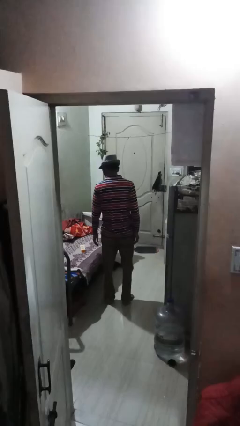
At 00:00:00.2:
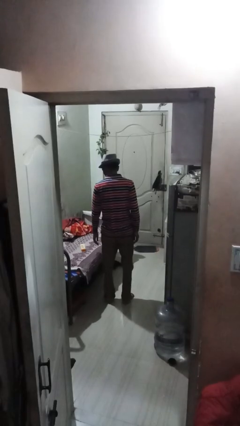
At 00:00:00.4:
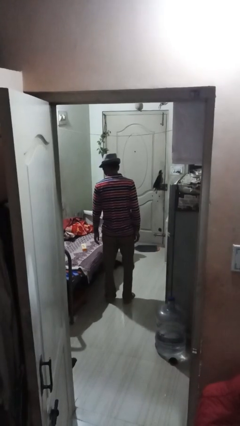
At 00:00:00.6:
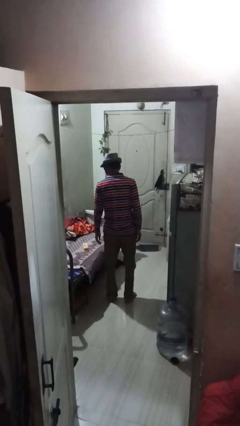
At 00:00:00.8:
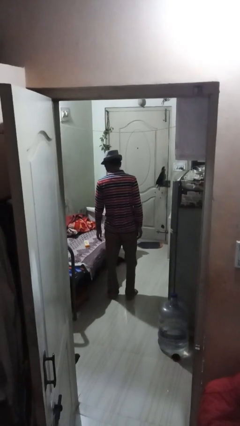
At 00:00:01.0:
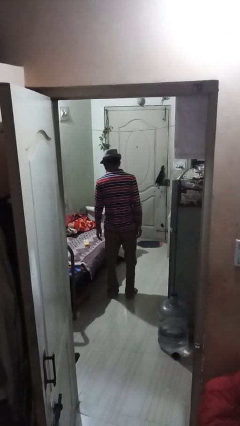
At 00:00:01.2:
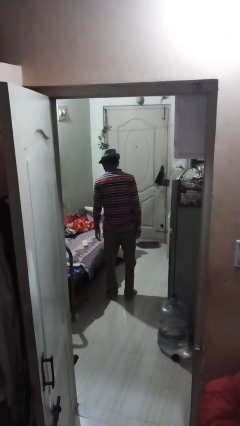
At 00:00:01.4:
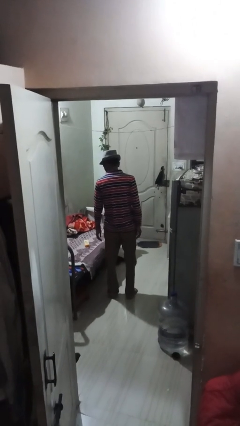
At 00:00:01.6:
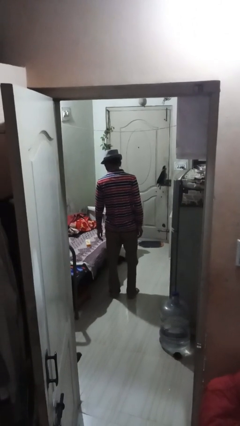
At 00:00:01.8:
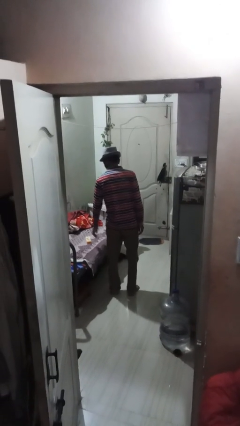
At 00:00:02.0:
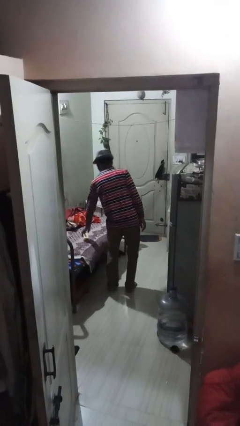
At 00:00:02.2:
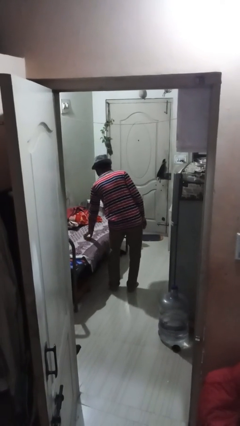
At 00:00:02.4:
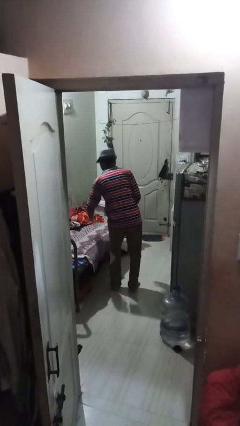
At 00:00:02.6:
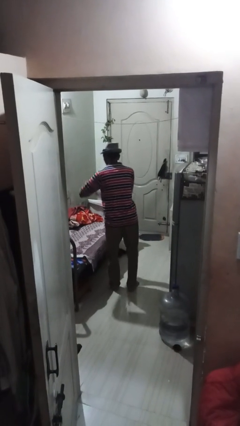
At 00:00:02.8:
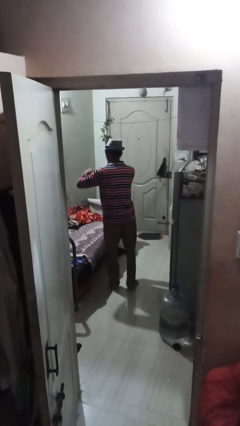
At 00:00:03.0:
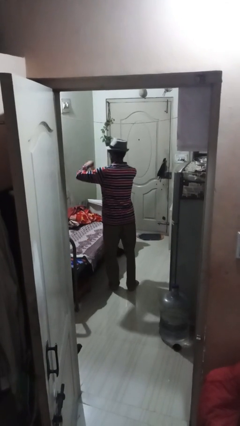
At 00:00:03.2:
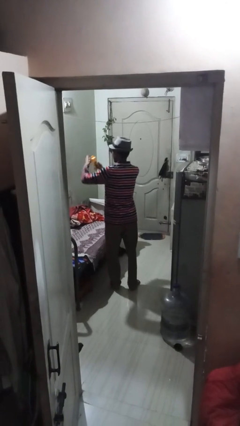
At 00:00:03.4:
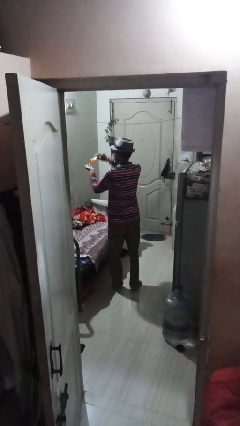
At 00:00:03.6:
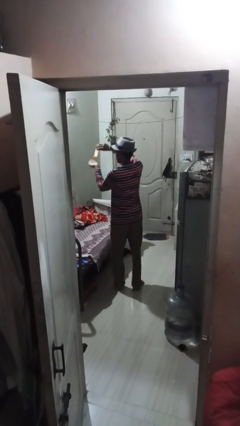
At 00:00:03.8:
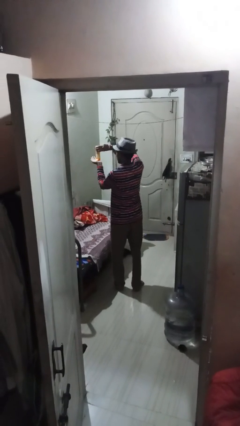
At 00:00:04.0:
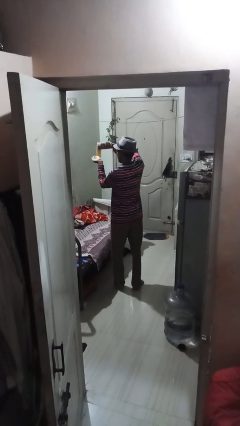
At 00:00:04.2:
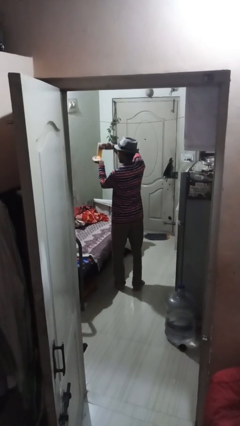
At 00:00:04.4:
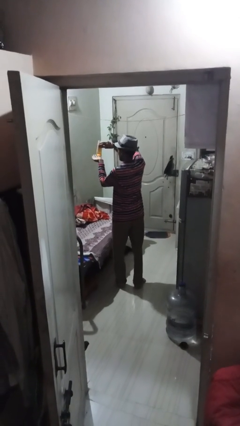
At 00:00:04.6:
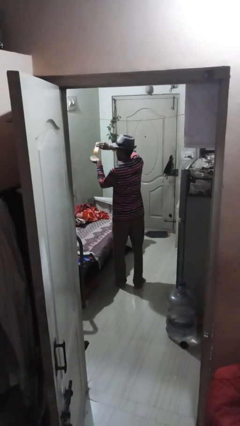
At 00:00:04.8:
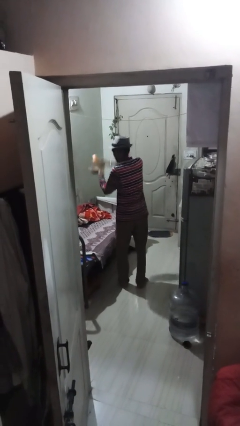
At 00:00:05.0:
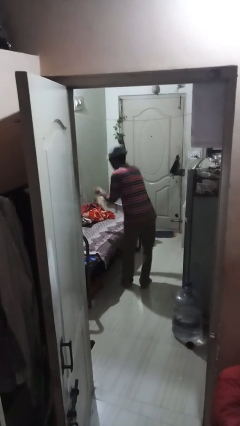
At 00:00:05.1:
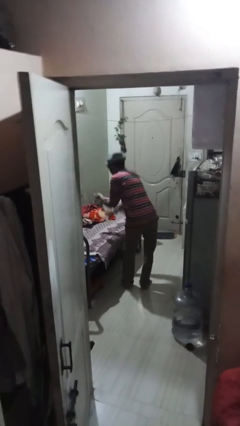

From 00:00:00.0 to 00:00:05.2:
person applies facial moisturizer

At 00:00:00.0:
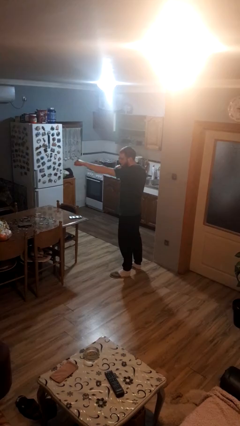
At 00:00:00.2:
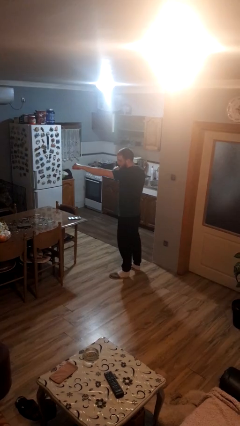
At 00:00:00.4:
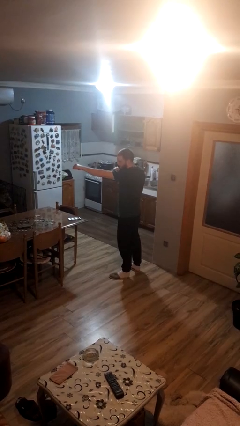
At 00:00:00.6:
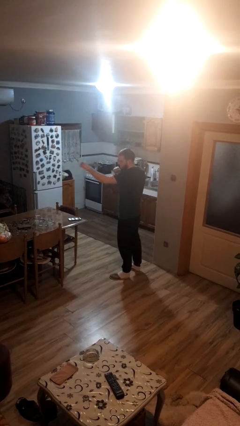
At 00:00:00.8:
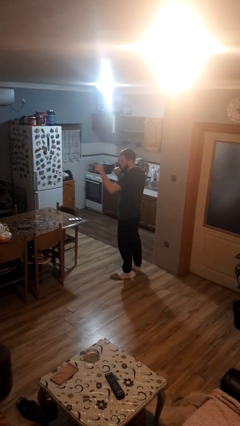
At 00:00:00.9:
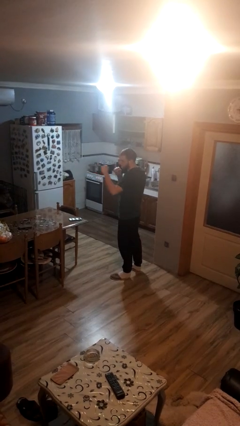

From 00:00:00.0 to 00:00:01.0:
person punches

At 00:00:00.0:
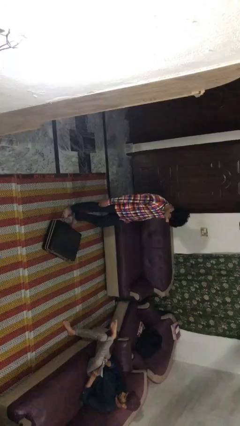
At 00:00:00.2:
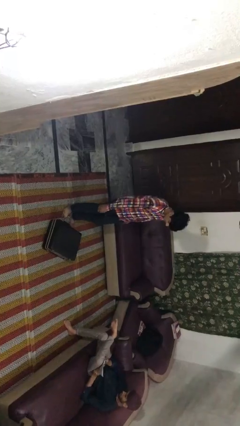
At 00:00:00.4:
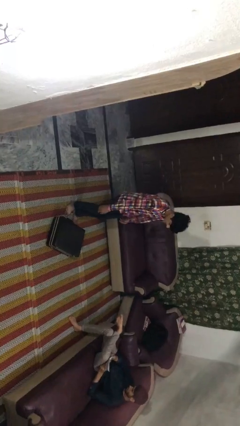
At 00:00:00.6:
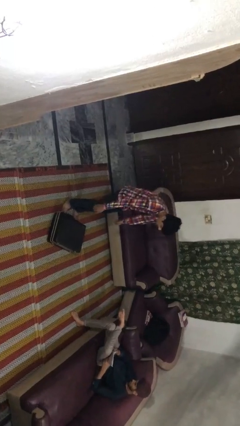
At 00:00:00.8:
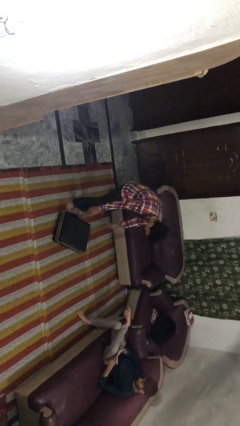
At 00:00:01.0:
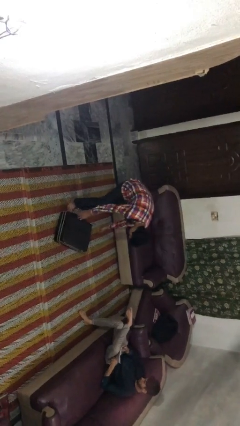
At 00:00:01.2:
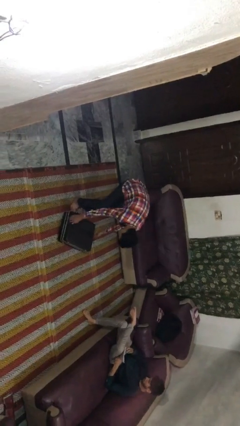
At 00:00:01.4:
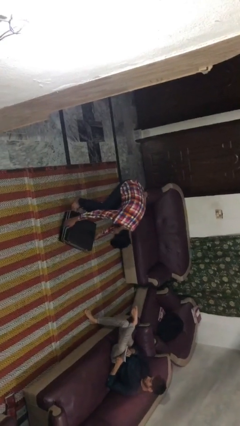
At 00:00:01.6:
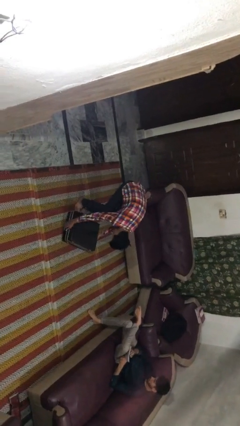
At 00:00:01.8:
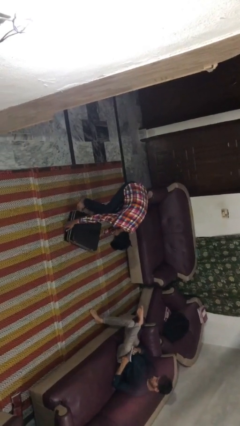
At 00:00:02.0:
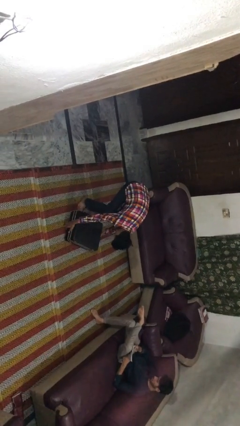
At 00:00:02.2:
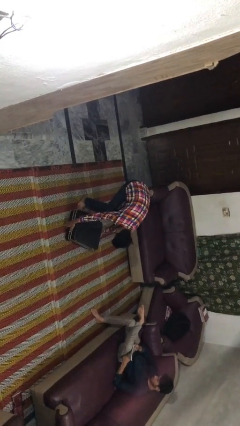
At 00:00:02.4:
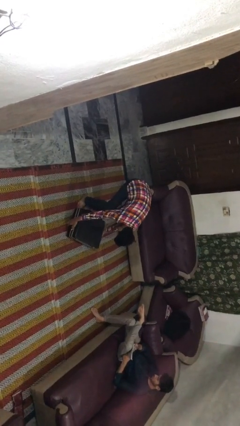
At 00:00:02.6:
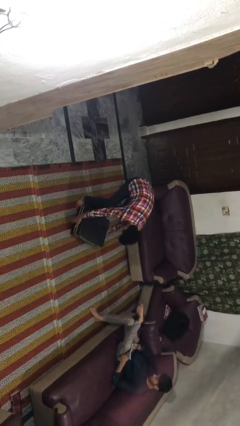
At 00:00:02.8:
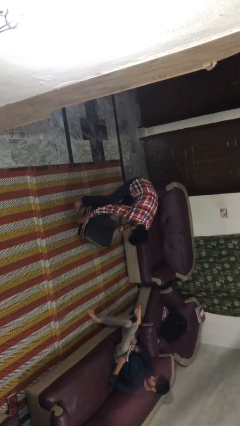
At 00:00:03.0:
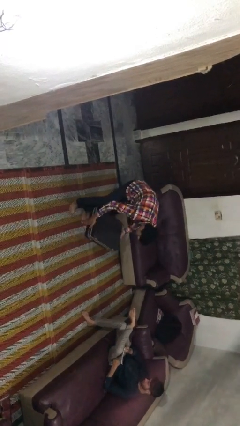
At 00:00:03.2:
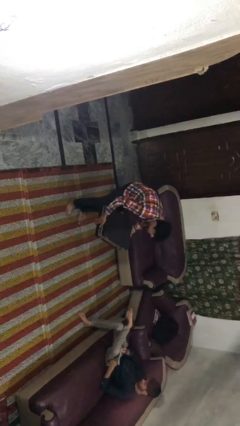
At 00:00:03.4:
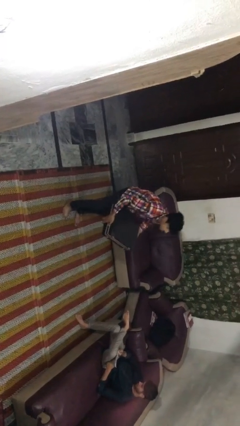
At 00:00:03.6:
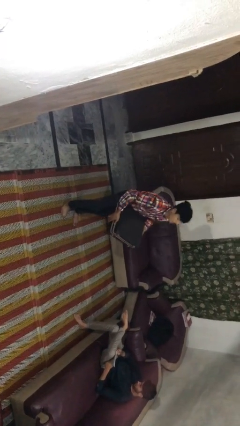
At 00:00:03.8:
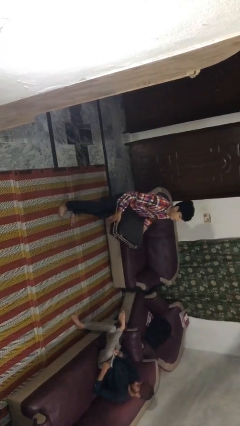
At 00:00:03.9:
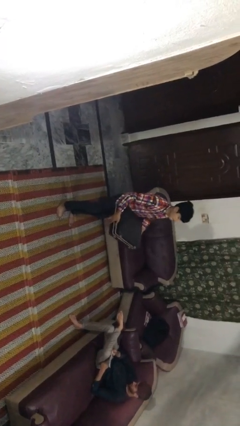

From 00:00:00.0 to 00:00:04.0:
person picks up object from floor

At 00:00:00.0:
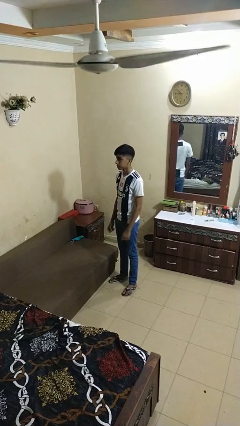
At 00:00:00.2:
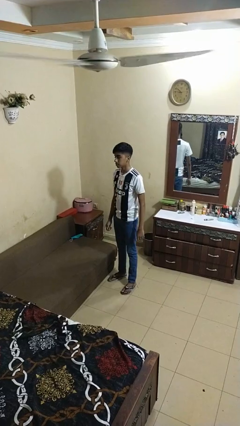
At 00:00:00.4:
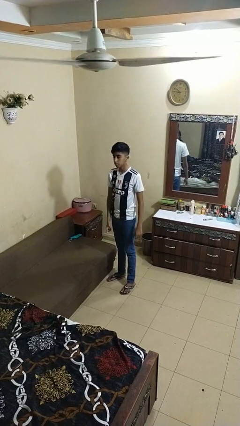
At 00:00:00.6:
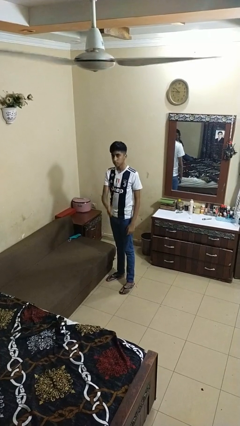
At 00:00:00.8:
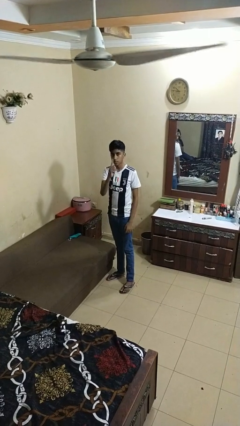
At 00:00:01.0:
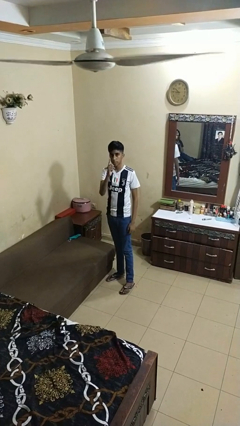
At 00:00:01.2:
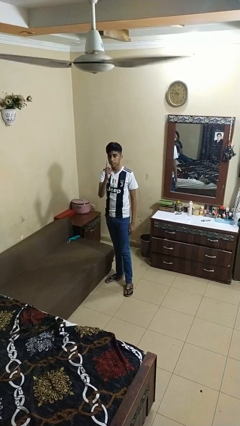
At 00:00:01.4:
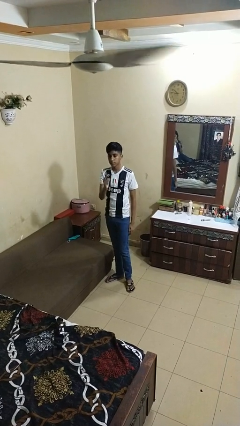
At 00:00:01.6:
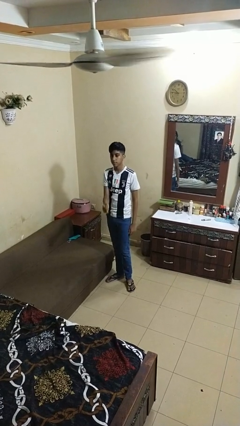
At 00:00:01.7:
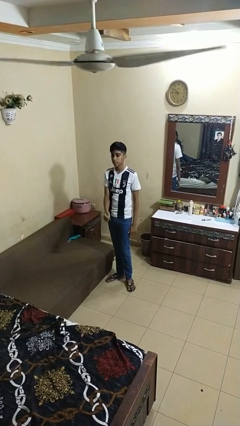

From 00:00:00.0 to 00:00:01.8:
person gestures number one

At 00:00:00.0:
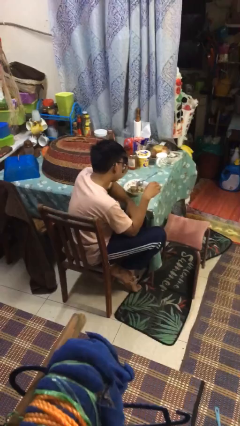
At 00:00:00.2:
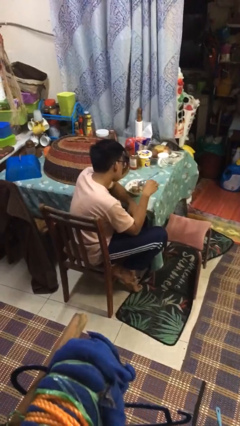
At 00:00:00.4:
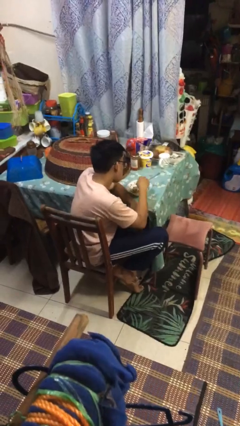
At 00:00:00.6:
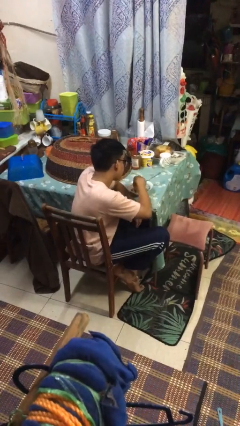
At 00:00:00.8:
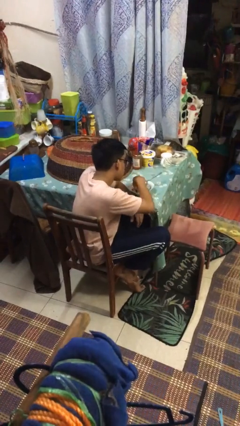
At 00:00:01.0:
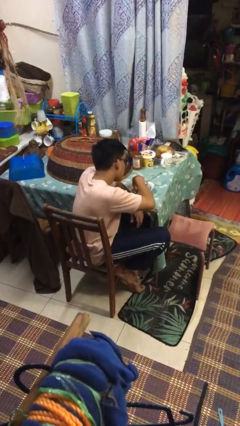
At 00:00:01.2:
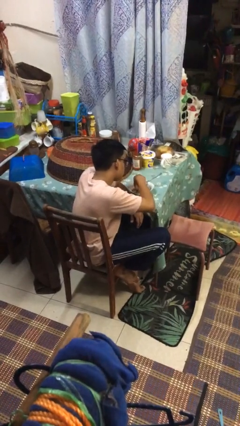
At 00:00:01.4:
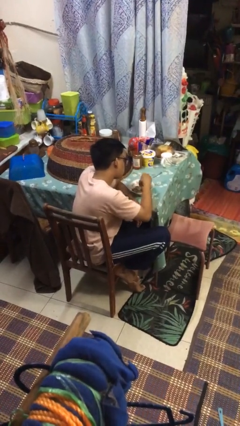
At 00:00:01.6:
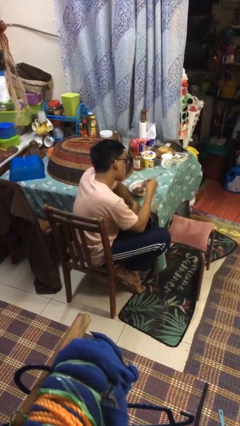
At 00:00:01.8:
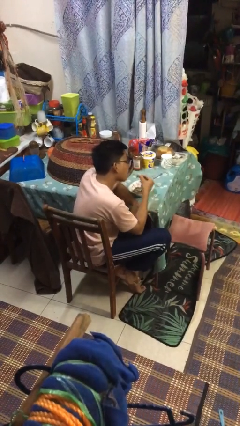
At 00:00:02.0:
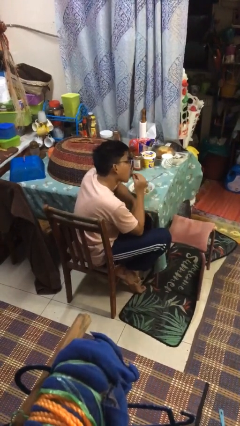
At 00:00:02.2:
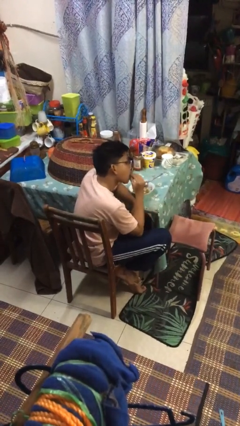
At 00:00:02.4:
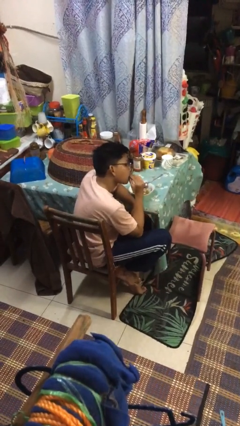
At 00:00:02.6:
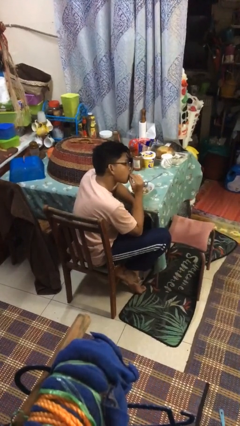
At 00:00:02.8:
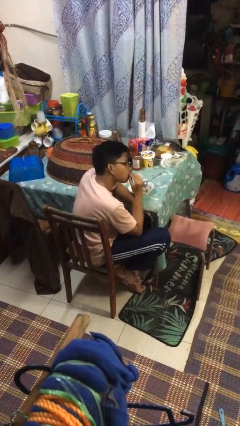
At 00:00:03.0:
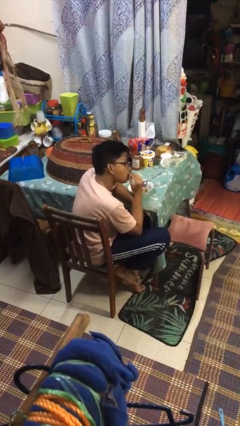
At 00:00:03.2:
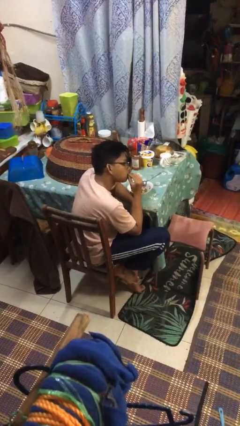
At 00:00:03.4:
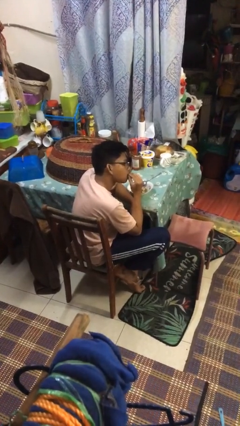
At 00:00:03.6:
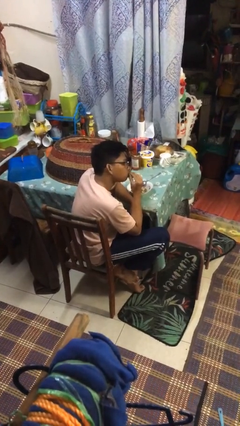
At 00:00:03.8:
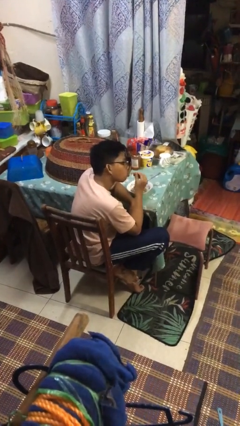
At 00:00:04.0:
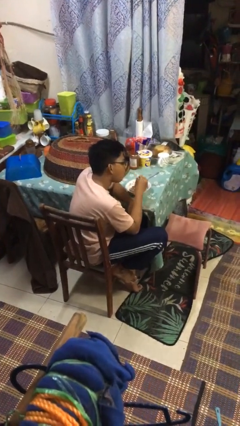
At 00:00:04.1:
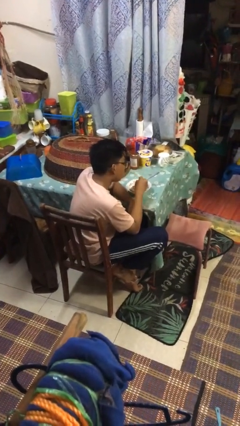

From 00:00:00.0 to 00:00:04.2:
person eats with hands

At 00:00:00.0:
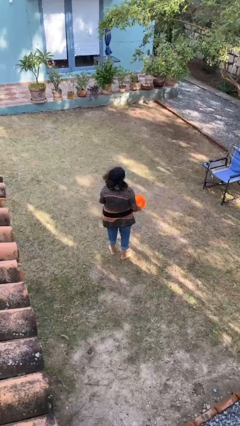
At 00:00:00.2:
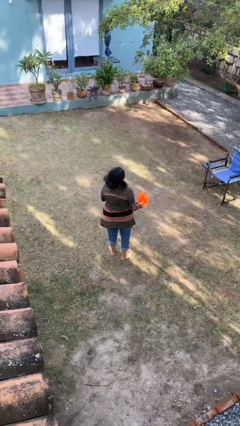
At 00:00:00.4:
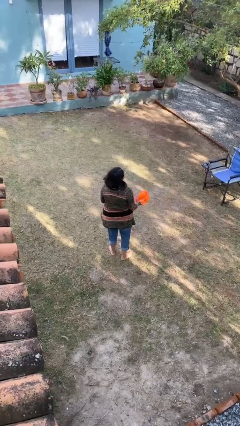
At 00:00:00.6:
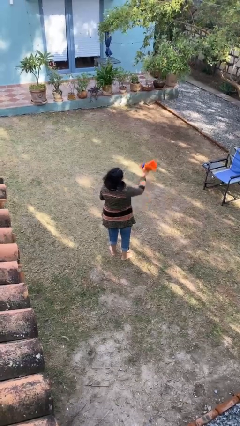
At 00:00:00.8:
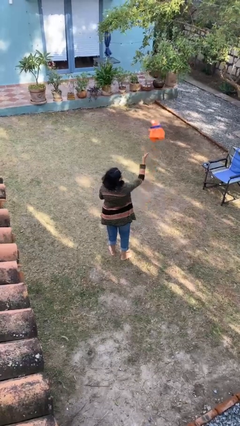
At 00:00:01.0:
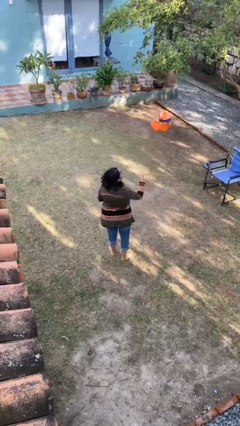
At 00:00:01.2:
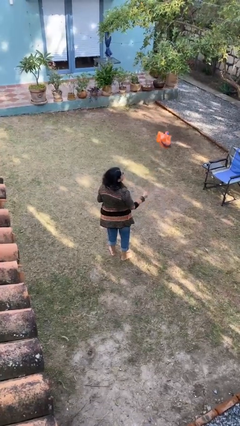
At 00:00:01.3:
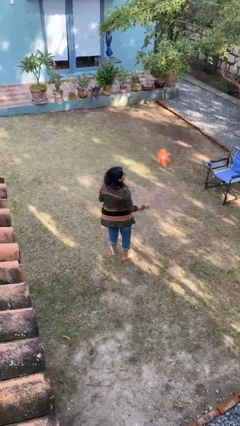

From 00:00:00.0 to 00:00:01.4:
person throws object into air
